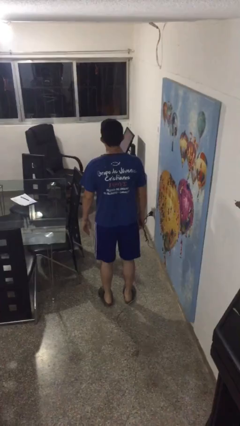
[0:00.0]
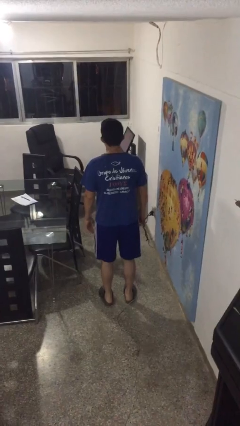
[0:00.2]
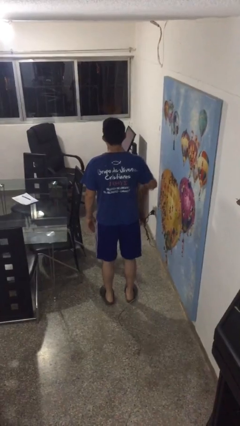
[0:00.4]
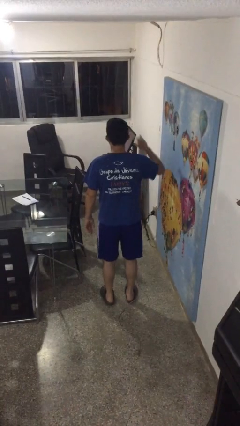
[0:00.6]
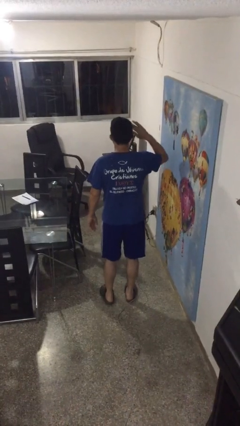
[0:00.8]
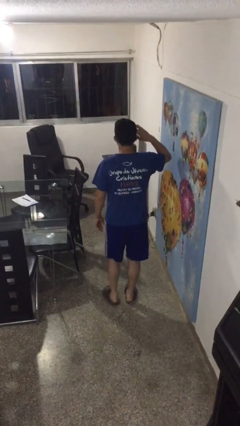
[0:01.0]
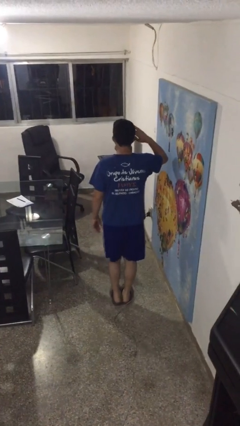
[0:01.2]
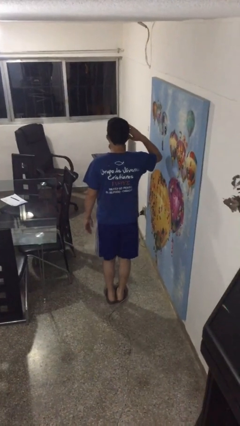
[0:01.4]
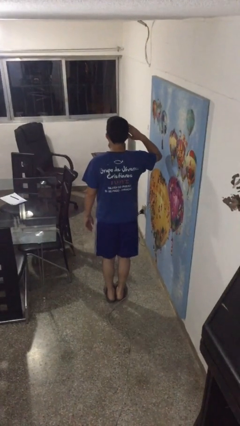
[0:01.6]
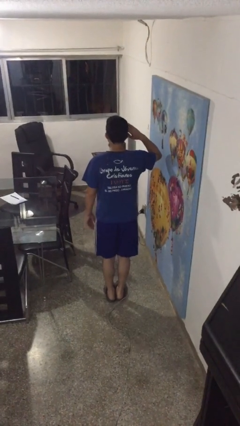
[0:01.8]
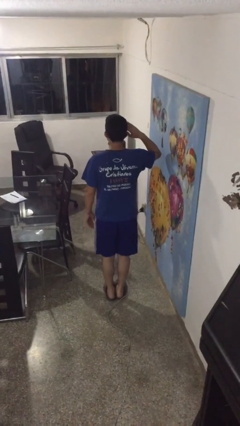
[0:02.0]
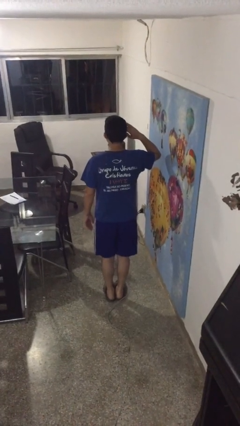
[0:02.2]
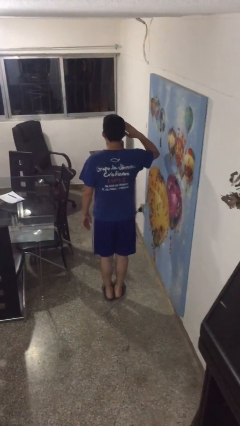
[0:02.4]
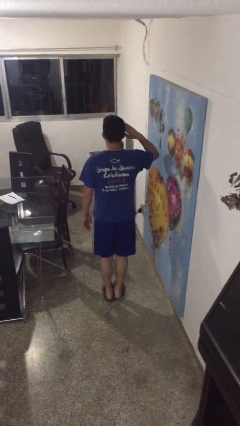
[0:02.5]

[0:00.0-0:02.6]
person salutes

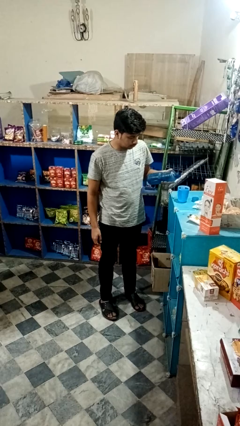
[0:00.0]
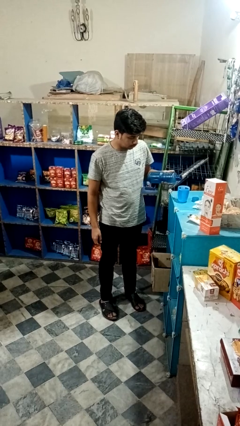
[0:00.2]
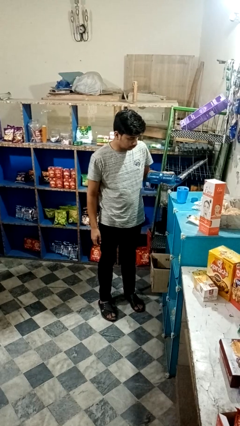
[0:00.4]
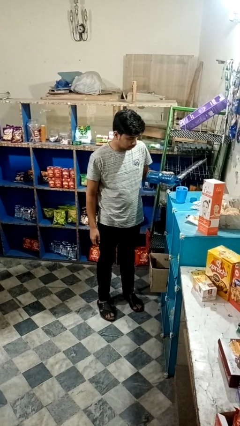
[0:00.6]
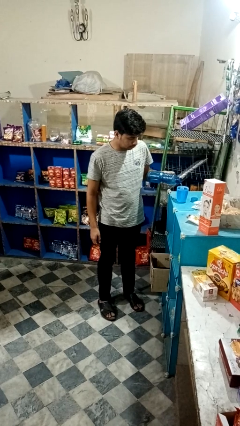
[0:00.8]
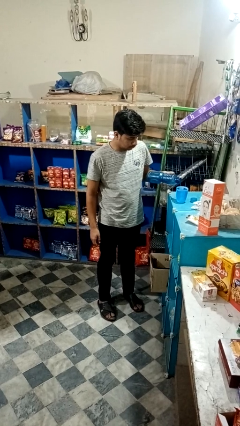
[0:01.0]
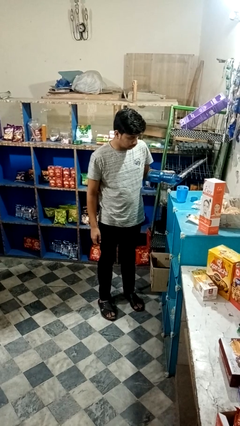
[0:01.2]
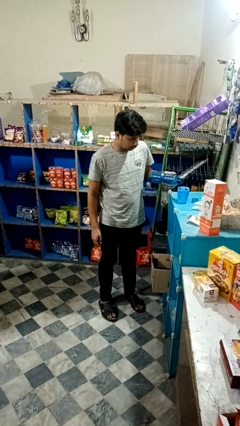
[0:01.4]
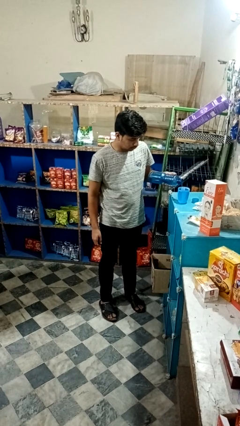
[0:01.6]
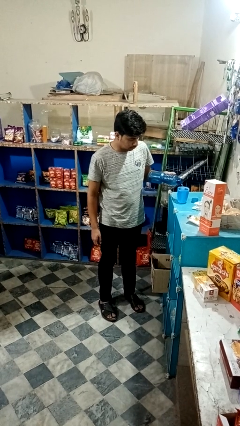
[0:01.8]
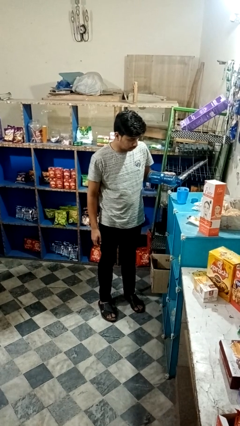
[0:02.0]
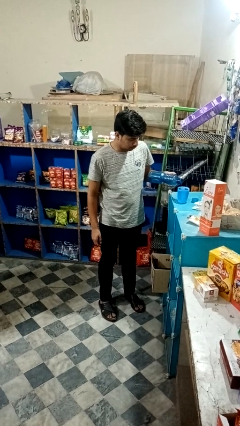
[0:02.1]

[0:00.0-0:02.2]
person pours liquid into cup

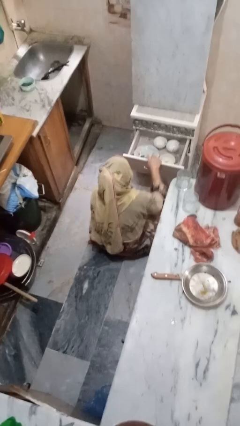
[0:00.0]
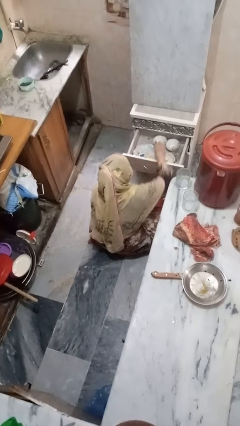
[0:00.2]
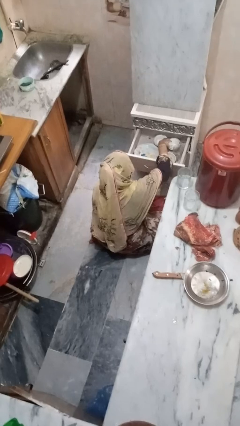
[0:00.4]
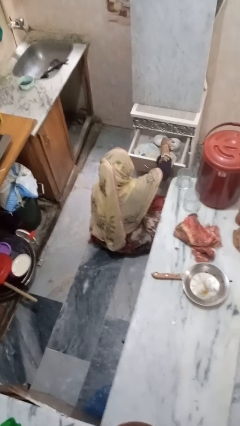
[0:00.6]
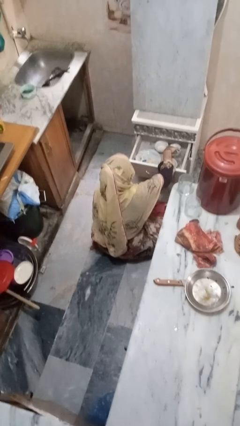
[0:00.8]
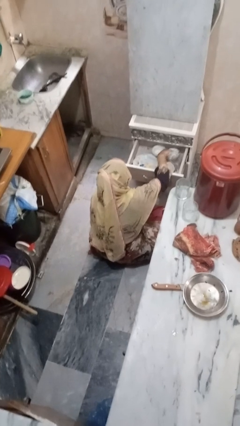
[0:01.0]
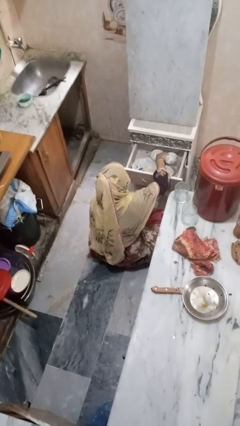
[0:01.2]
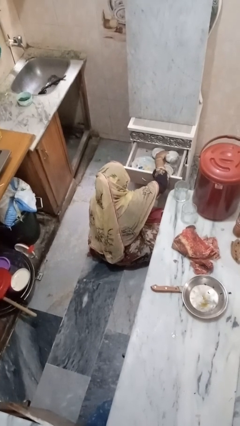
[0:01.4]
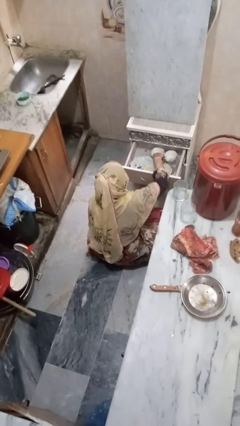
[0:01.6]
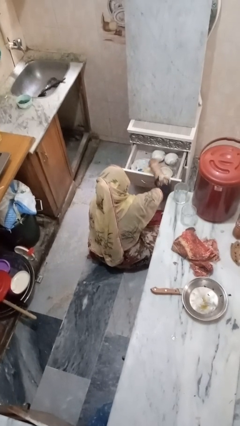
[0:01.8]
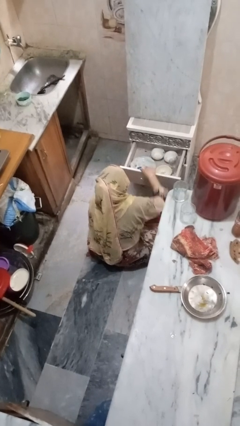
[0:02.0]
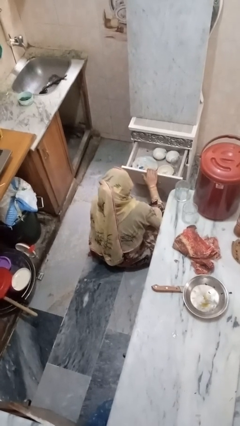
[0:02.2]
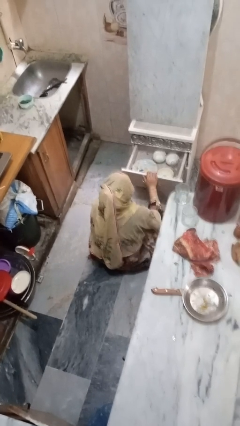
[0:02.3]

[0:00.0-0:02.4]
person searches in kitchen drawer

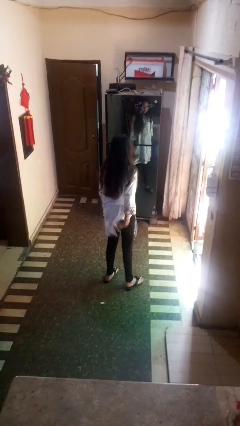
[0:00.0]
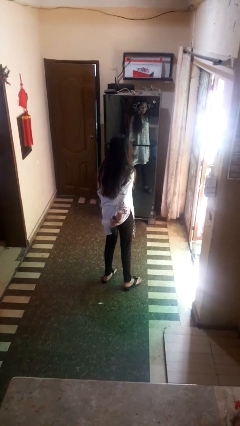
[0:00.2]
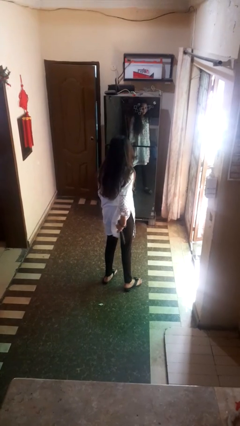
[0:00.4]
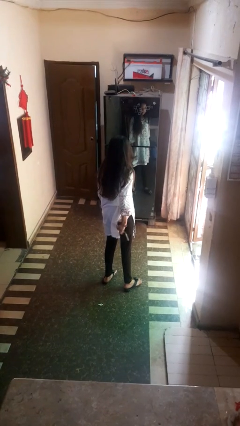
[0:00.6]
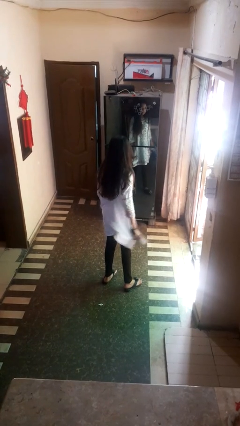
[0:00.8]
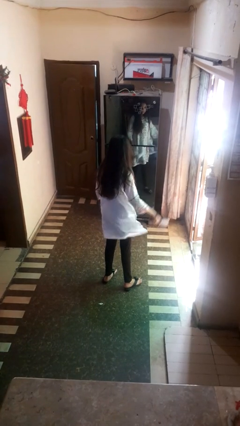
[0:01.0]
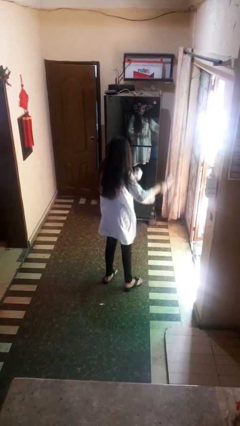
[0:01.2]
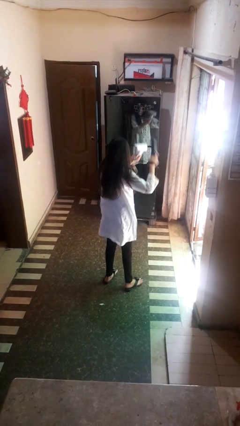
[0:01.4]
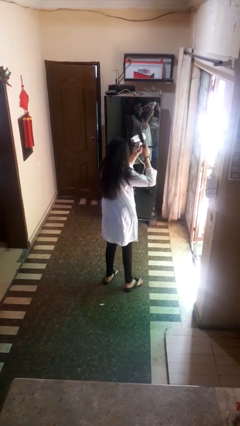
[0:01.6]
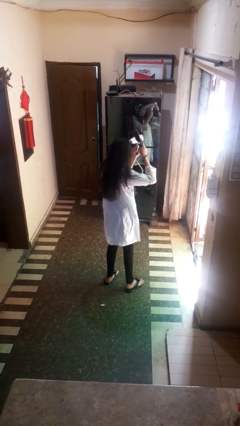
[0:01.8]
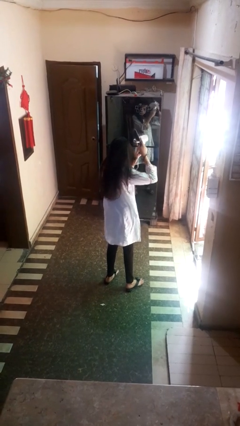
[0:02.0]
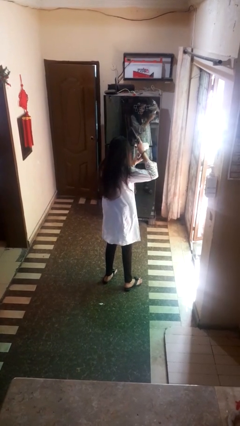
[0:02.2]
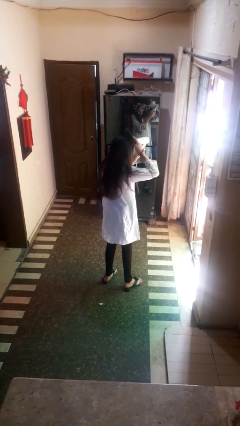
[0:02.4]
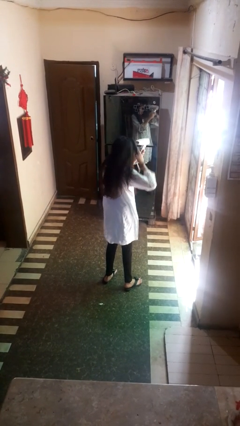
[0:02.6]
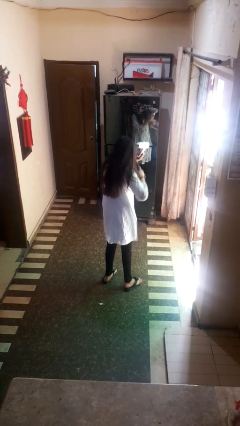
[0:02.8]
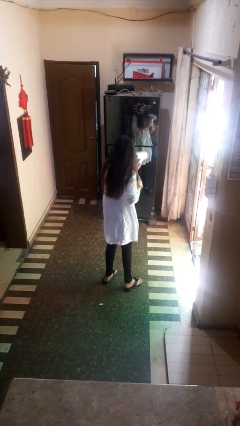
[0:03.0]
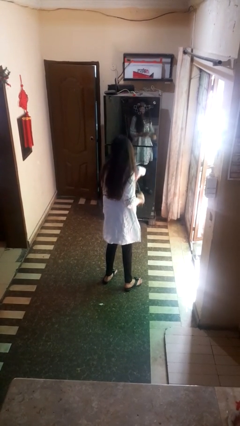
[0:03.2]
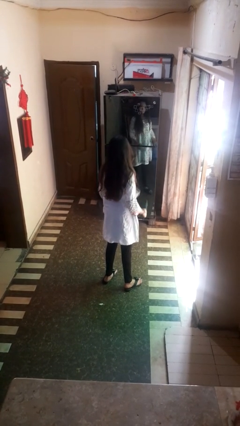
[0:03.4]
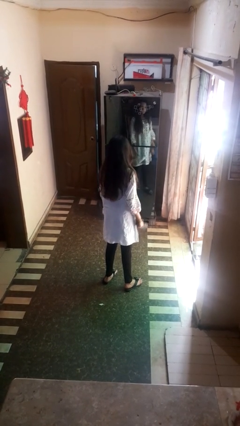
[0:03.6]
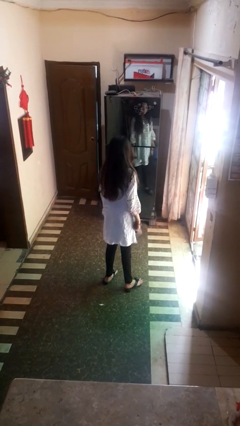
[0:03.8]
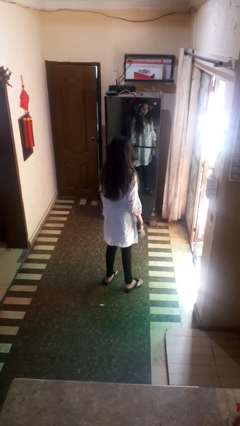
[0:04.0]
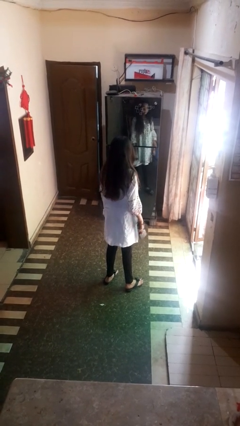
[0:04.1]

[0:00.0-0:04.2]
person dries hair with hairdryer

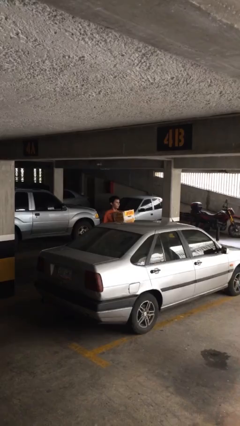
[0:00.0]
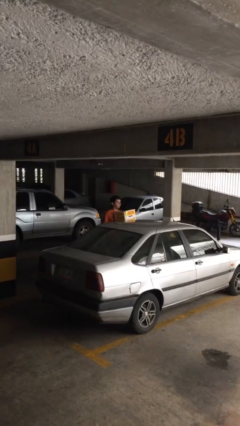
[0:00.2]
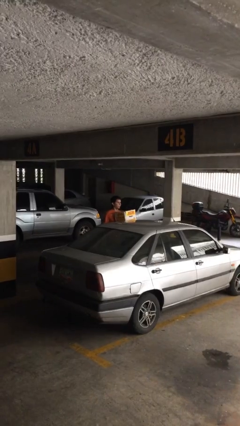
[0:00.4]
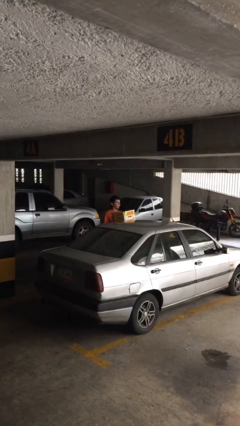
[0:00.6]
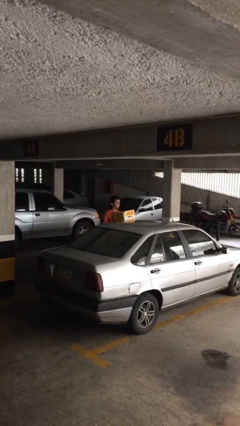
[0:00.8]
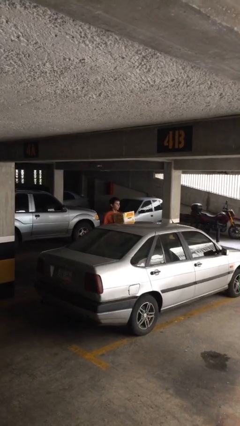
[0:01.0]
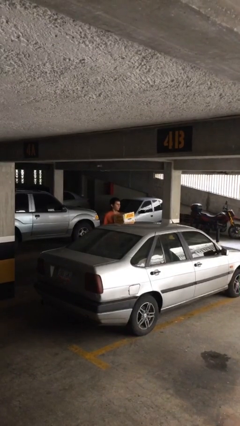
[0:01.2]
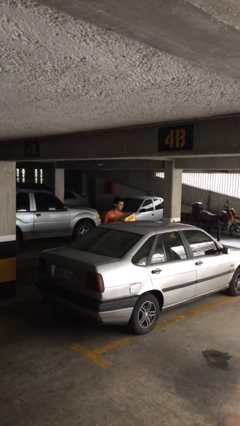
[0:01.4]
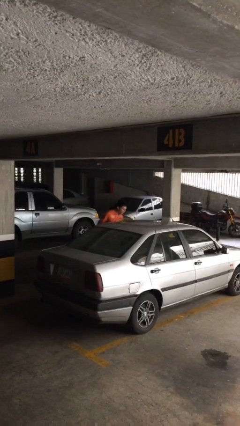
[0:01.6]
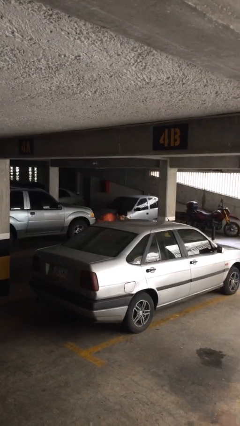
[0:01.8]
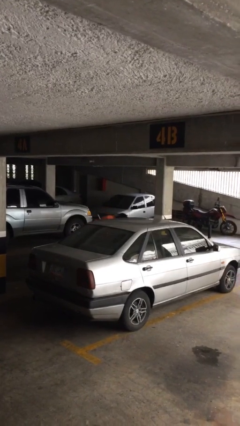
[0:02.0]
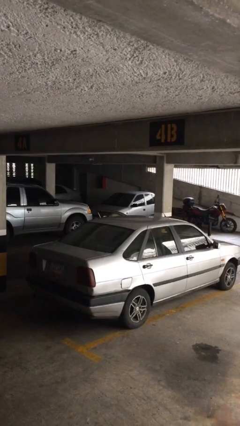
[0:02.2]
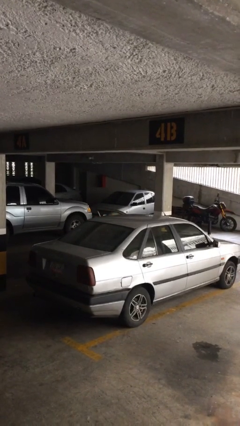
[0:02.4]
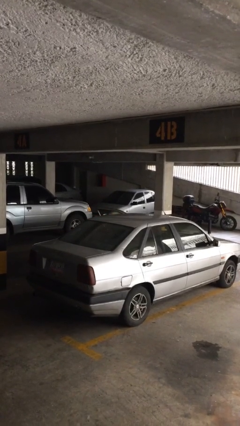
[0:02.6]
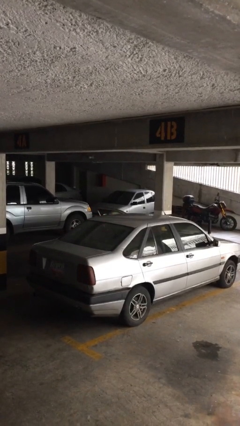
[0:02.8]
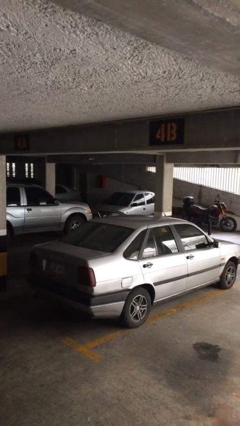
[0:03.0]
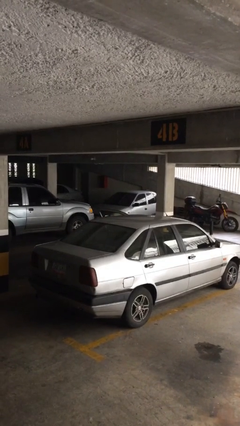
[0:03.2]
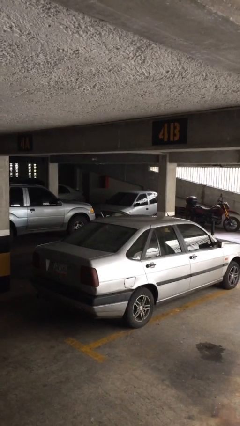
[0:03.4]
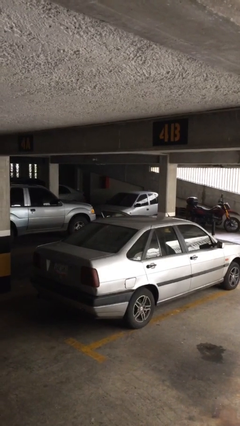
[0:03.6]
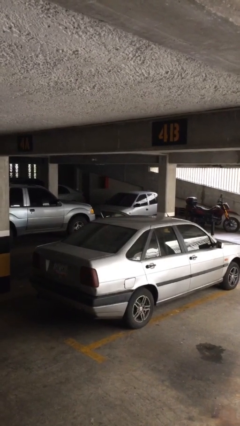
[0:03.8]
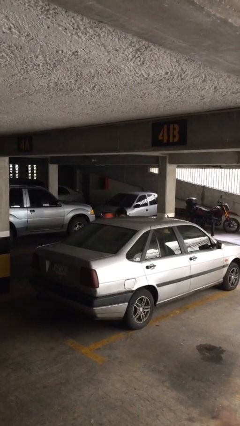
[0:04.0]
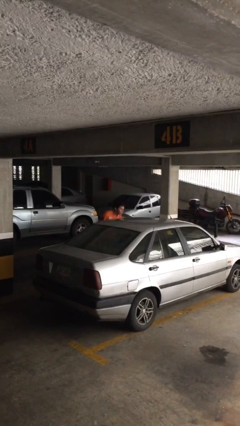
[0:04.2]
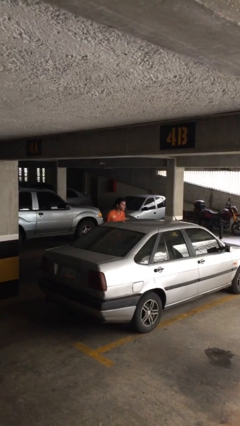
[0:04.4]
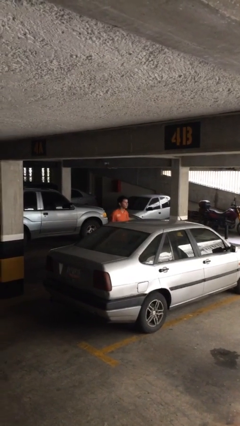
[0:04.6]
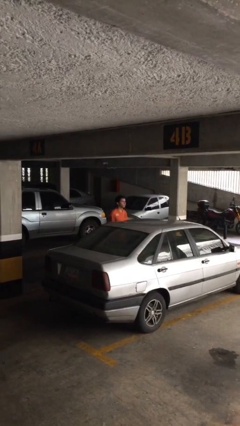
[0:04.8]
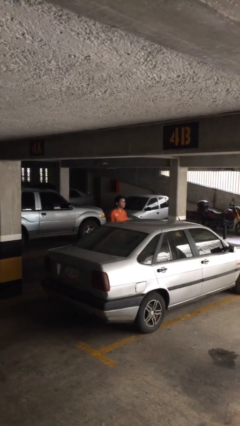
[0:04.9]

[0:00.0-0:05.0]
person loads car

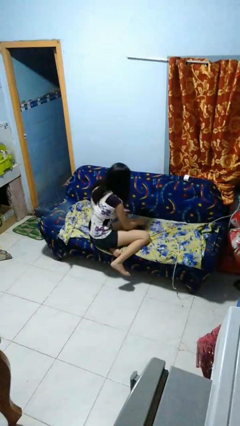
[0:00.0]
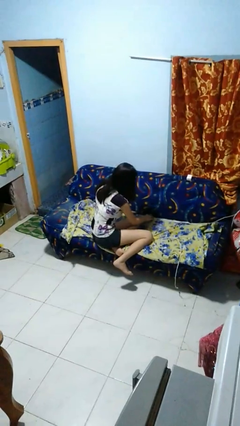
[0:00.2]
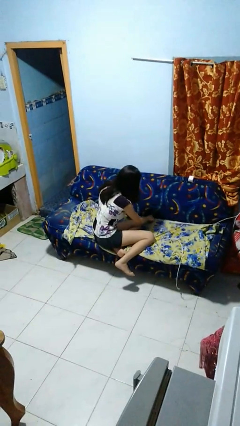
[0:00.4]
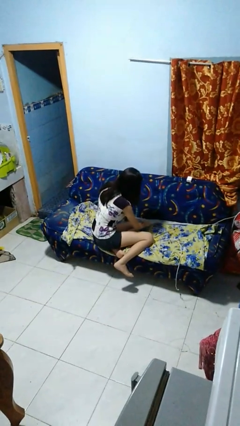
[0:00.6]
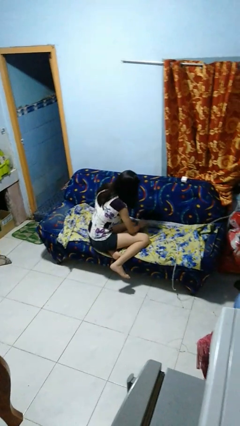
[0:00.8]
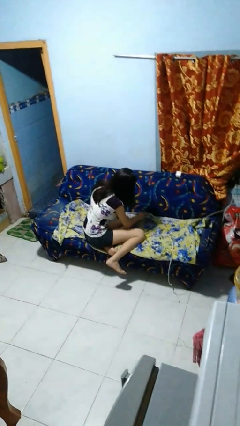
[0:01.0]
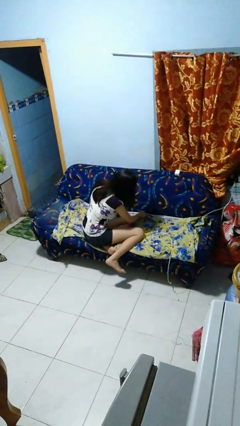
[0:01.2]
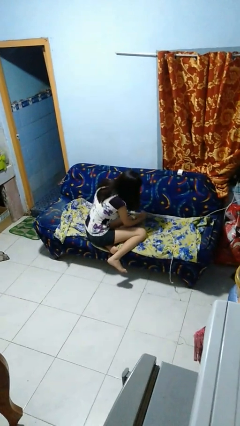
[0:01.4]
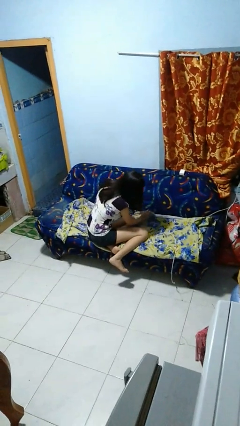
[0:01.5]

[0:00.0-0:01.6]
person searches in couch
